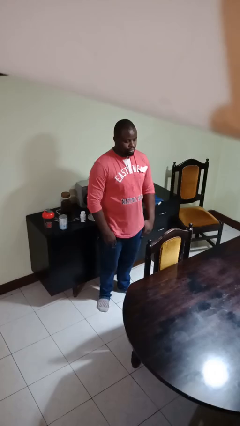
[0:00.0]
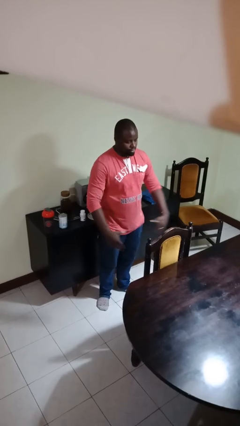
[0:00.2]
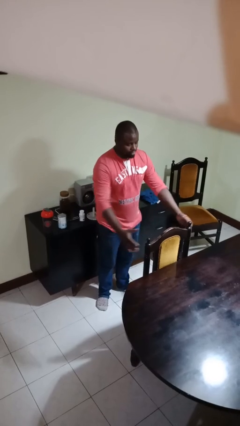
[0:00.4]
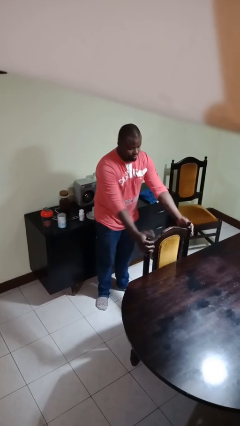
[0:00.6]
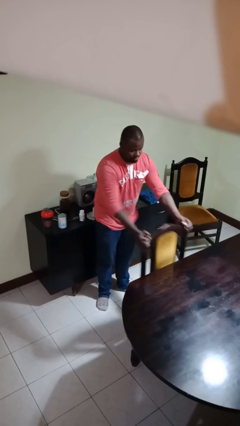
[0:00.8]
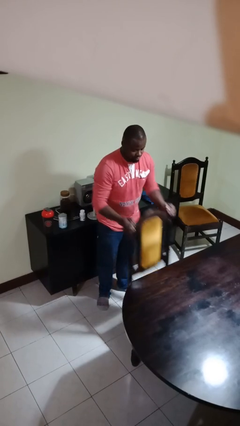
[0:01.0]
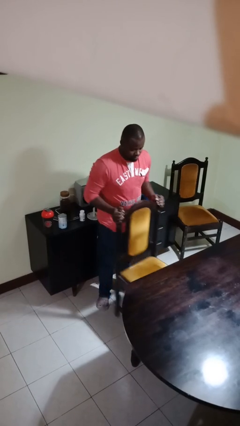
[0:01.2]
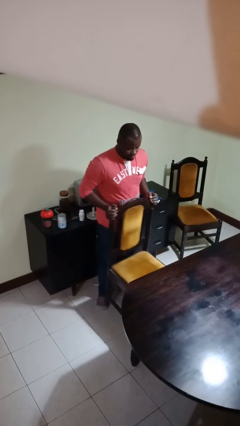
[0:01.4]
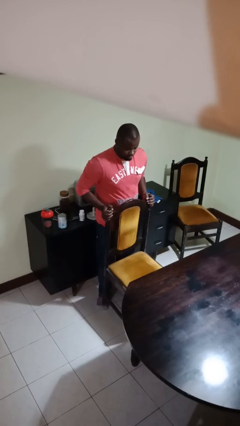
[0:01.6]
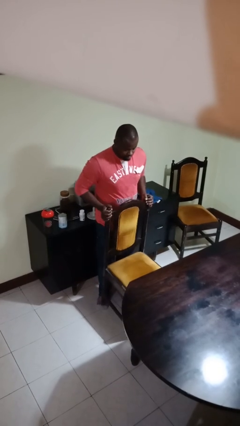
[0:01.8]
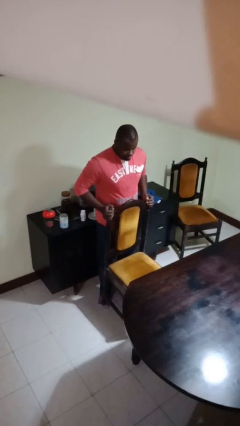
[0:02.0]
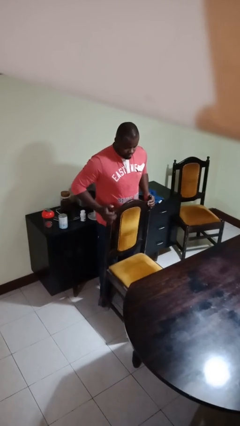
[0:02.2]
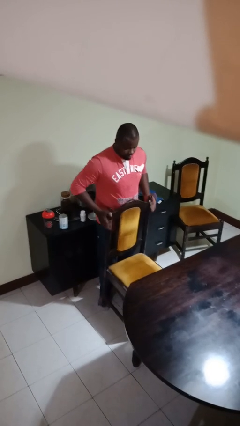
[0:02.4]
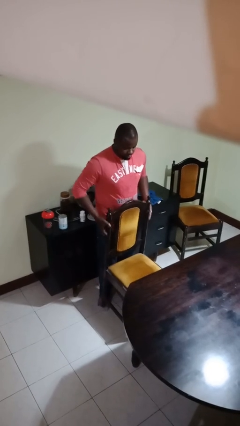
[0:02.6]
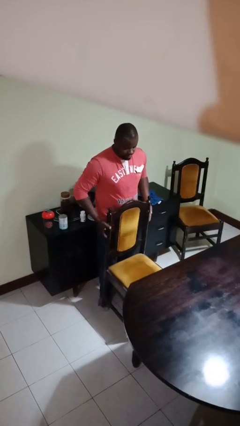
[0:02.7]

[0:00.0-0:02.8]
person pulls out chair

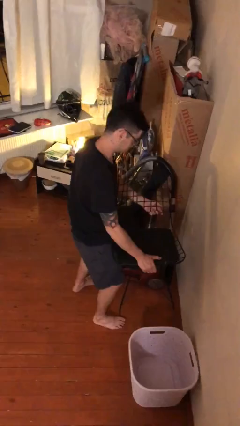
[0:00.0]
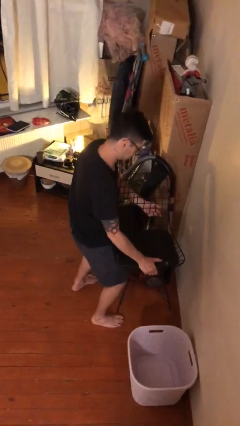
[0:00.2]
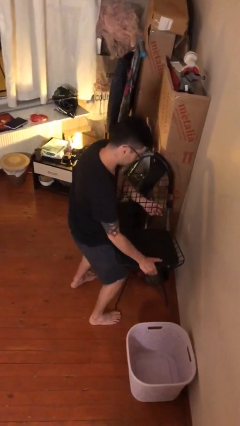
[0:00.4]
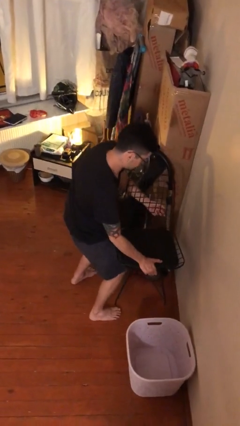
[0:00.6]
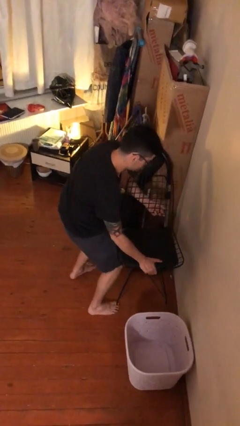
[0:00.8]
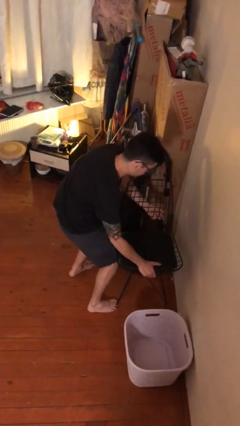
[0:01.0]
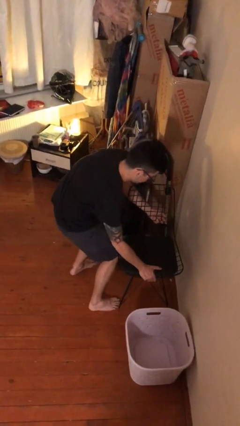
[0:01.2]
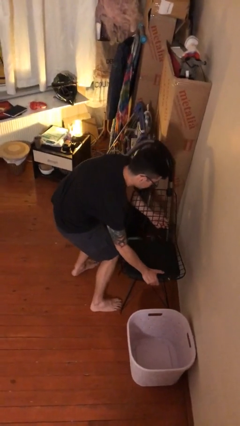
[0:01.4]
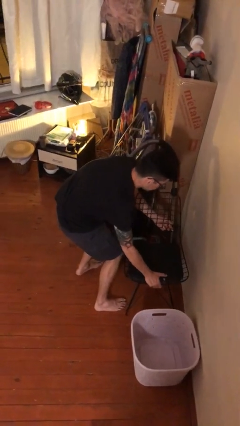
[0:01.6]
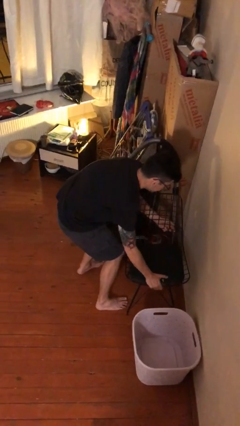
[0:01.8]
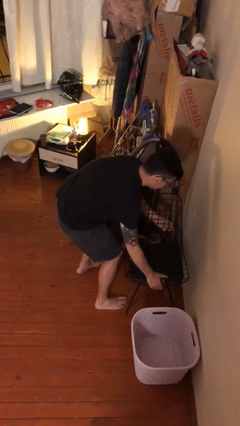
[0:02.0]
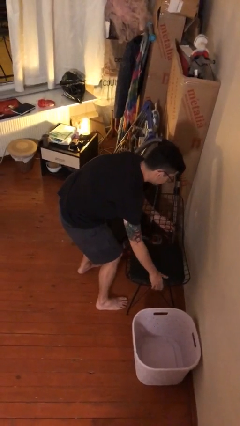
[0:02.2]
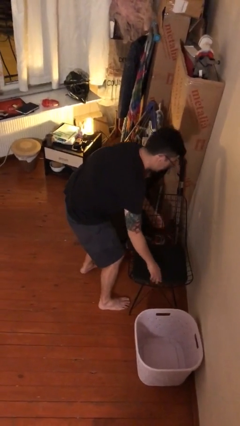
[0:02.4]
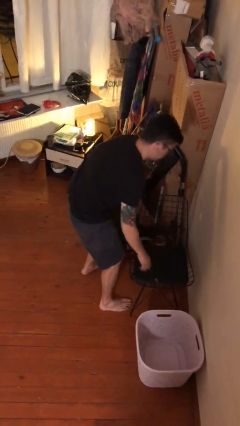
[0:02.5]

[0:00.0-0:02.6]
person puts down object on floor

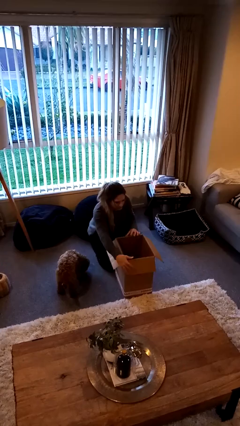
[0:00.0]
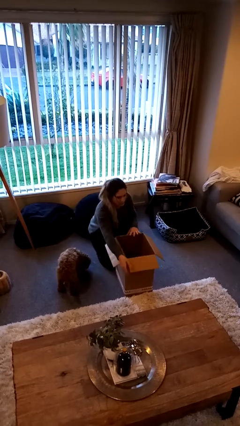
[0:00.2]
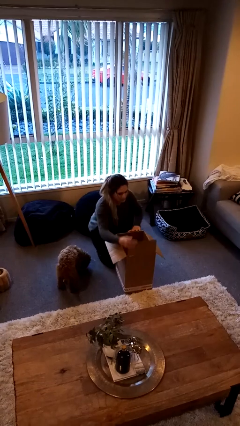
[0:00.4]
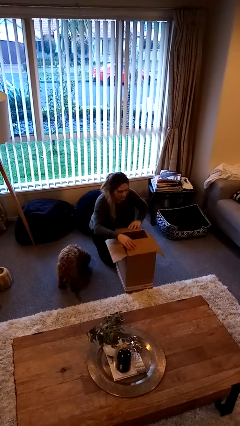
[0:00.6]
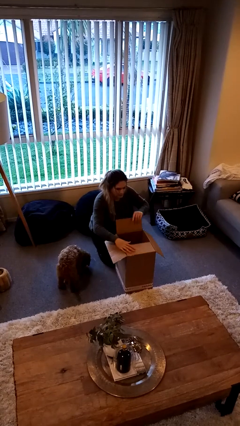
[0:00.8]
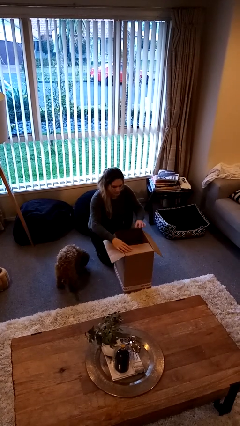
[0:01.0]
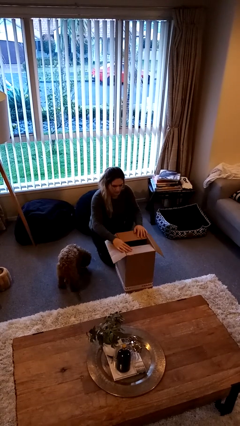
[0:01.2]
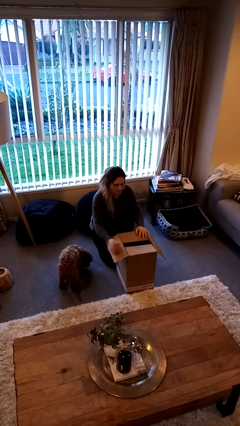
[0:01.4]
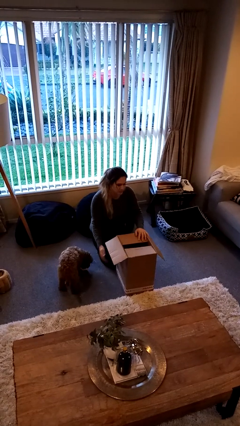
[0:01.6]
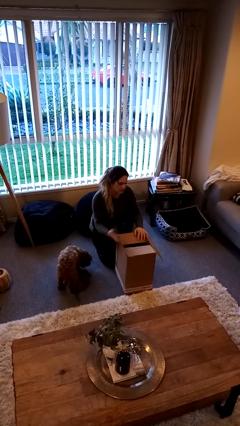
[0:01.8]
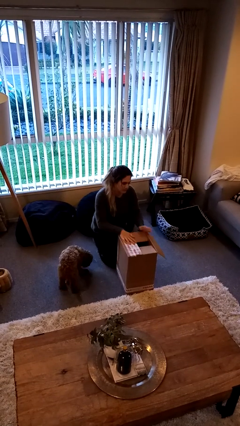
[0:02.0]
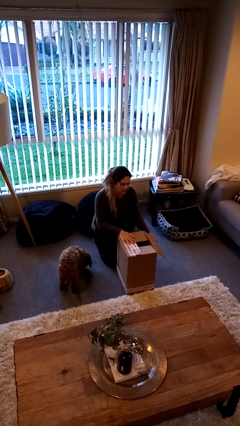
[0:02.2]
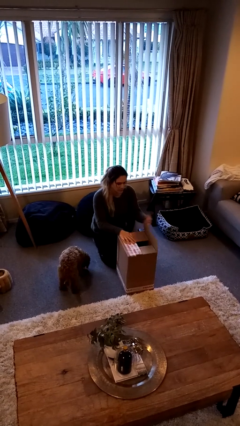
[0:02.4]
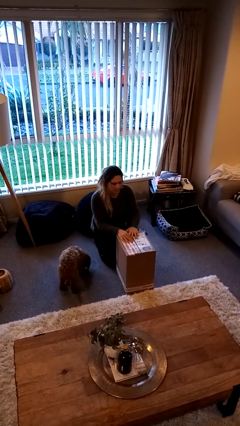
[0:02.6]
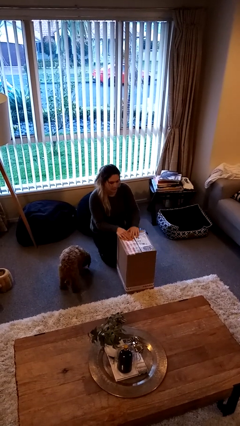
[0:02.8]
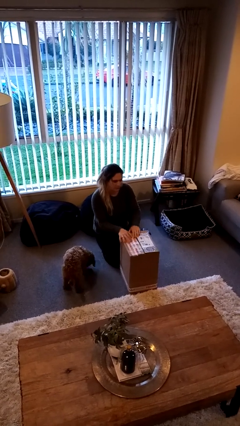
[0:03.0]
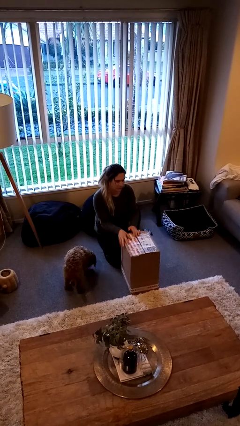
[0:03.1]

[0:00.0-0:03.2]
person closes box

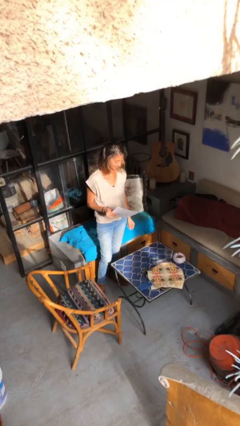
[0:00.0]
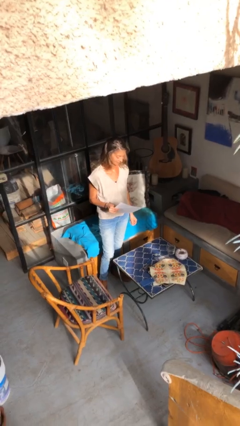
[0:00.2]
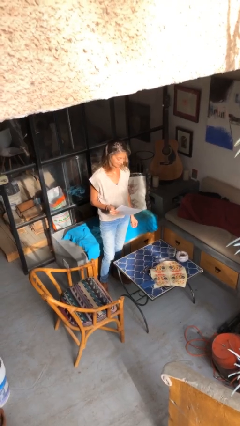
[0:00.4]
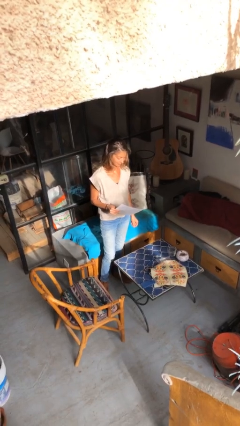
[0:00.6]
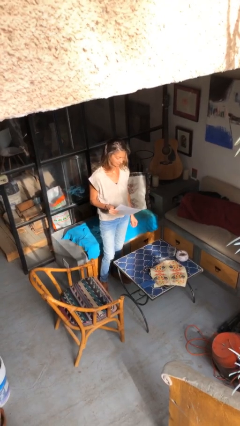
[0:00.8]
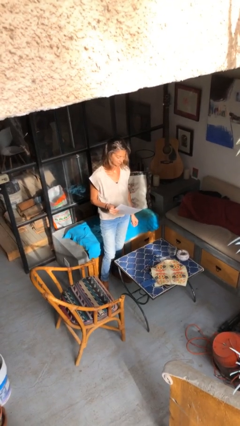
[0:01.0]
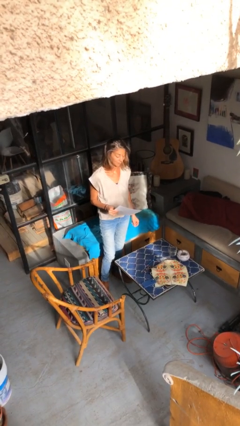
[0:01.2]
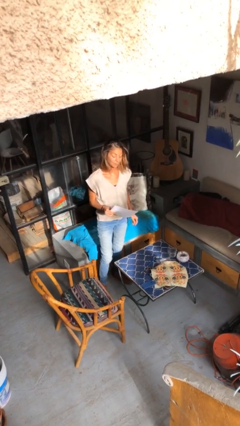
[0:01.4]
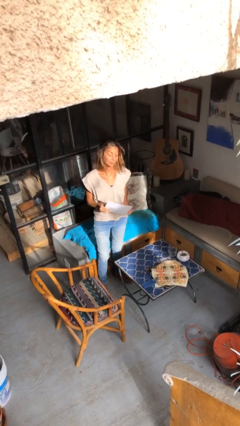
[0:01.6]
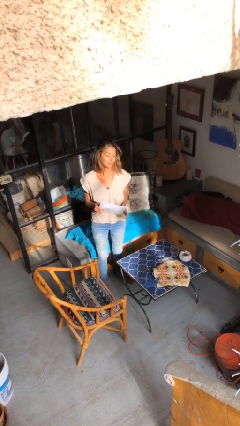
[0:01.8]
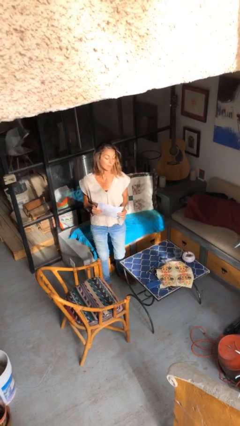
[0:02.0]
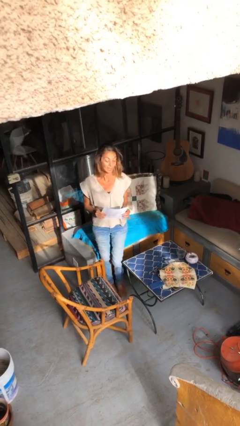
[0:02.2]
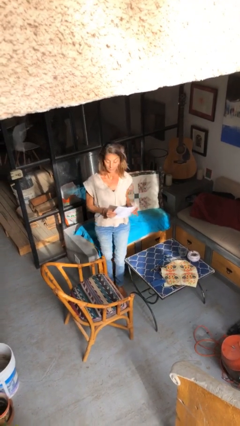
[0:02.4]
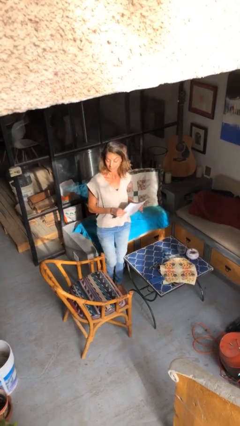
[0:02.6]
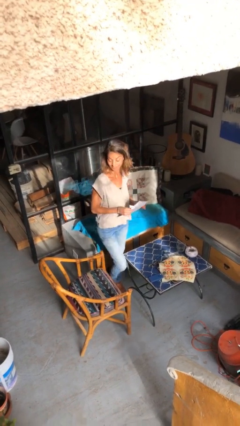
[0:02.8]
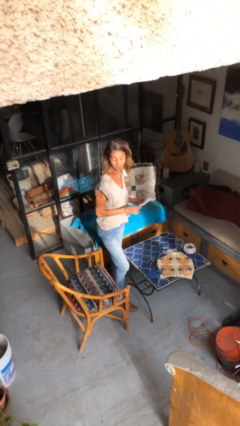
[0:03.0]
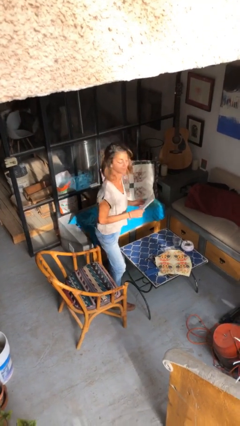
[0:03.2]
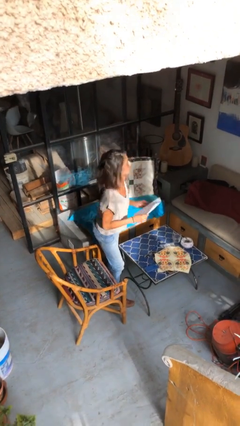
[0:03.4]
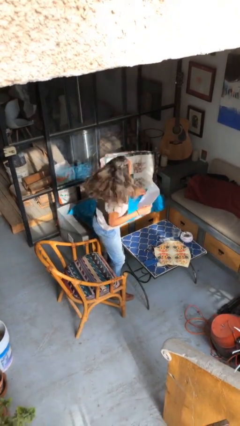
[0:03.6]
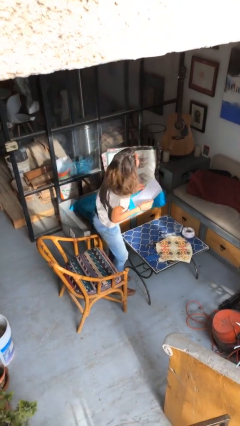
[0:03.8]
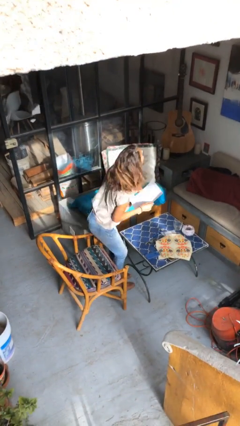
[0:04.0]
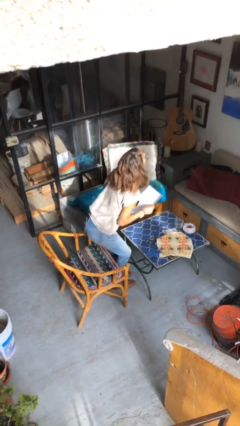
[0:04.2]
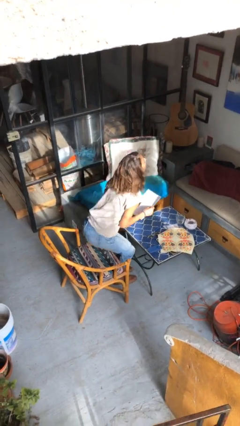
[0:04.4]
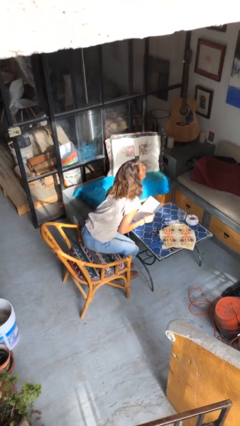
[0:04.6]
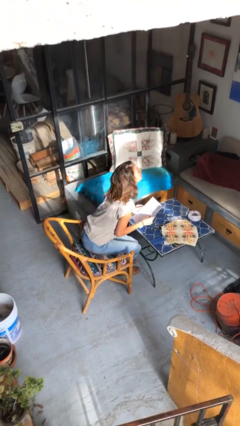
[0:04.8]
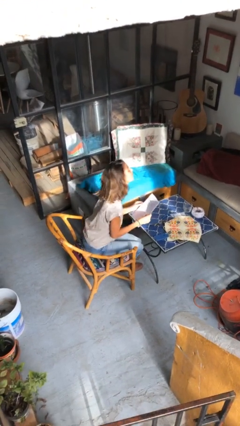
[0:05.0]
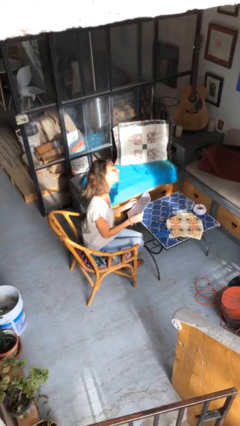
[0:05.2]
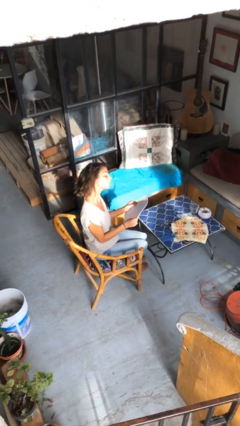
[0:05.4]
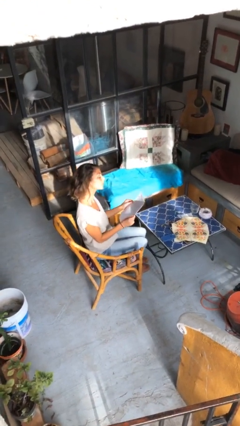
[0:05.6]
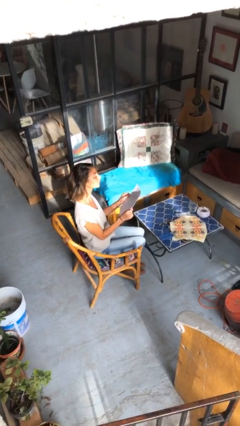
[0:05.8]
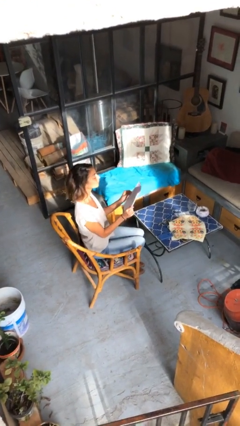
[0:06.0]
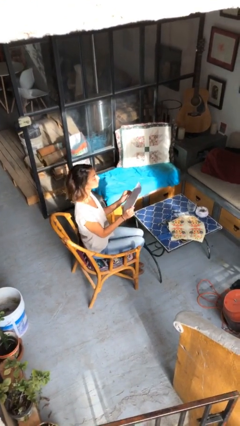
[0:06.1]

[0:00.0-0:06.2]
person sits down

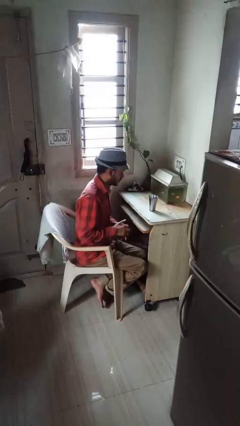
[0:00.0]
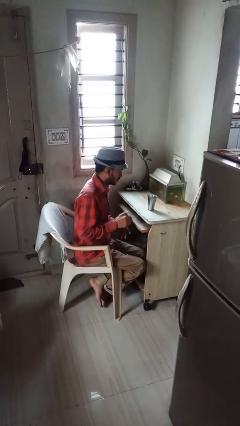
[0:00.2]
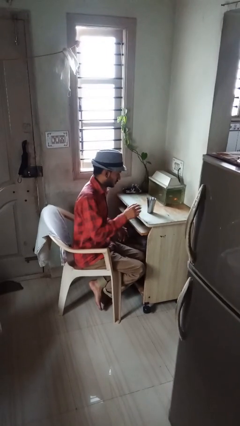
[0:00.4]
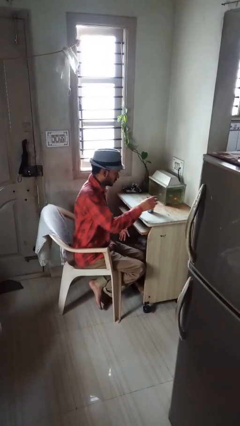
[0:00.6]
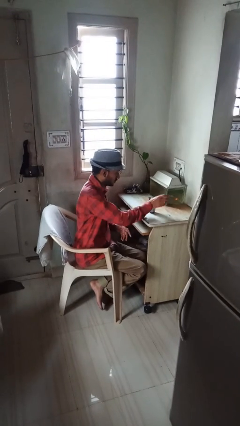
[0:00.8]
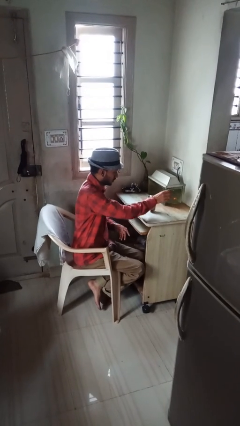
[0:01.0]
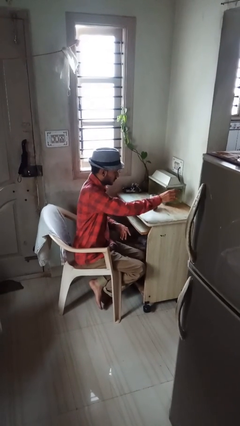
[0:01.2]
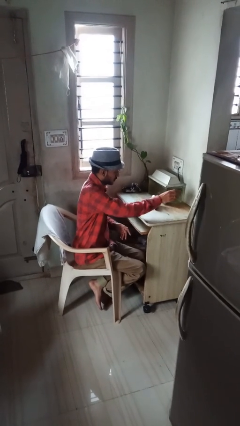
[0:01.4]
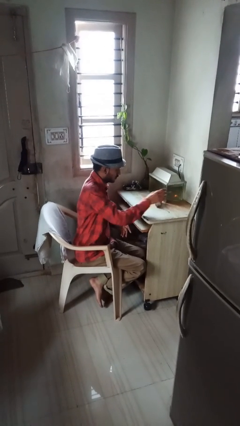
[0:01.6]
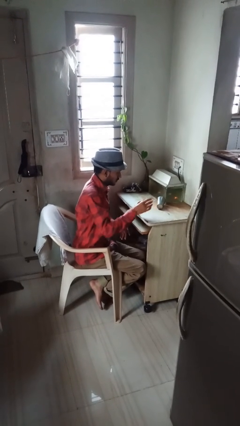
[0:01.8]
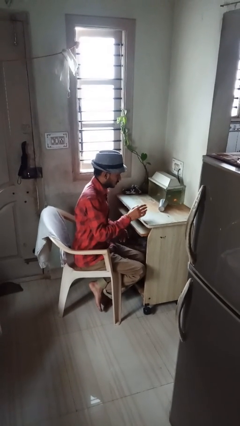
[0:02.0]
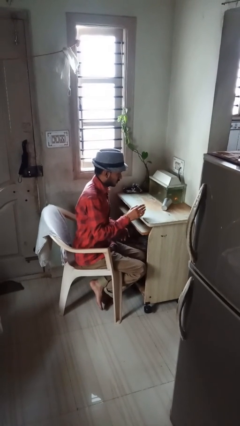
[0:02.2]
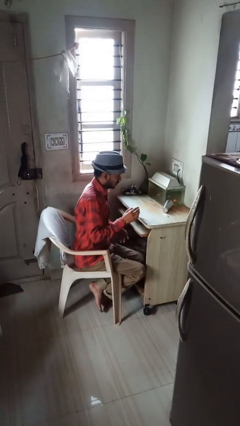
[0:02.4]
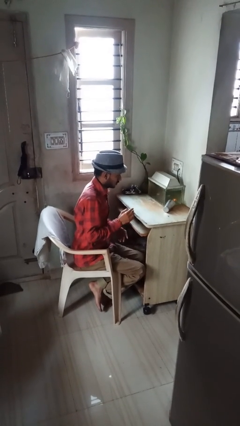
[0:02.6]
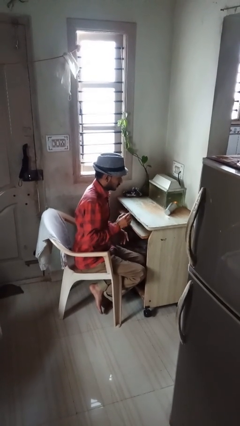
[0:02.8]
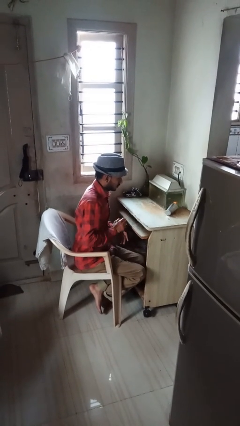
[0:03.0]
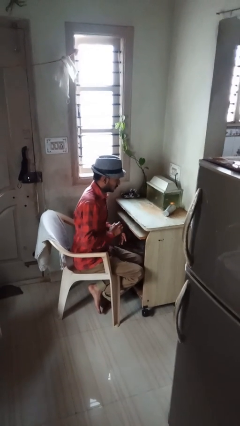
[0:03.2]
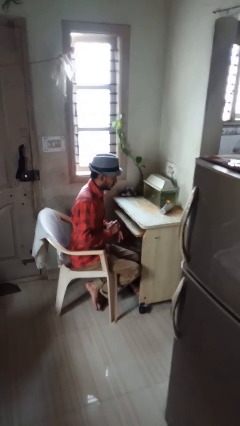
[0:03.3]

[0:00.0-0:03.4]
person knocks over glass
